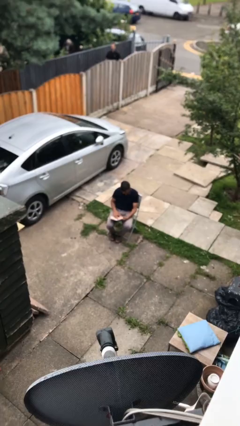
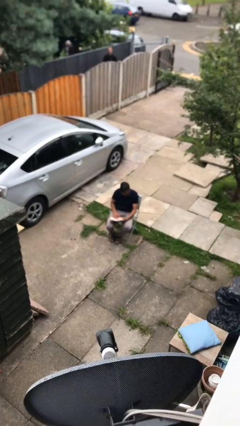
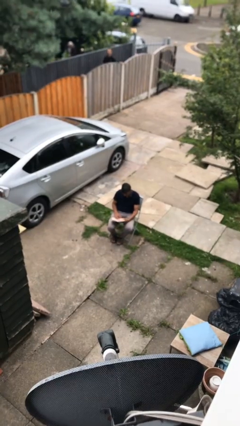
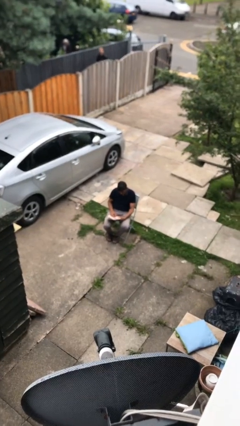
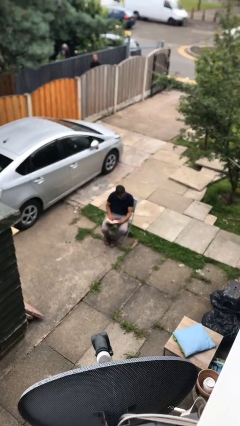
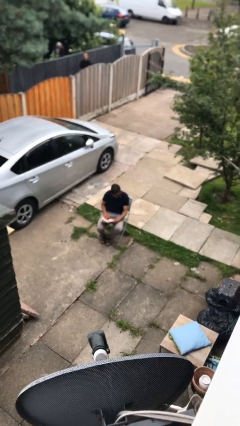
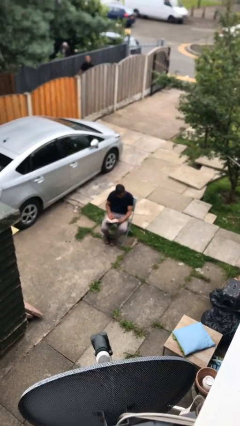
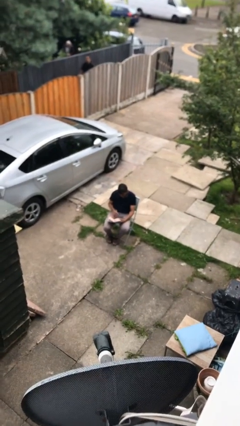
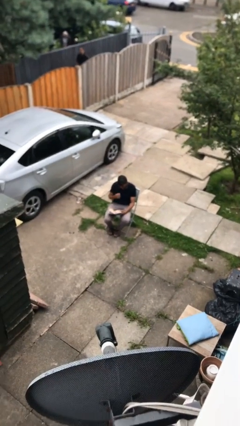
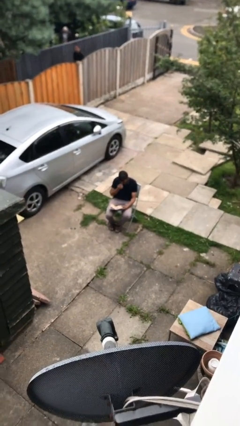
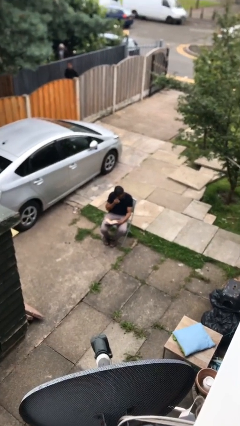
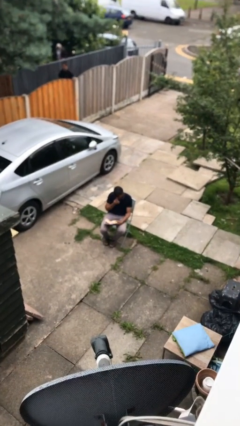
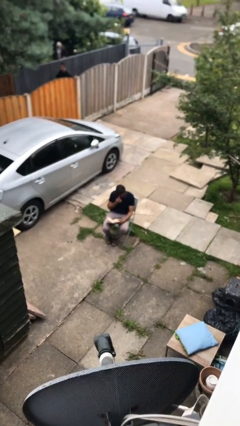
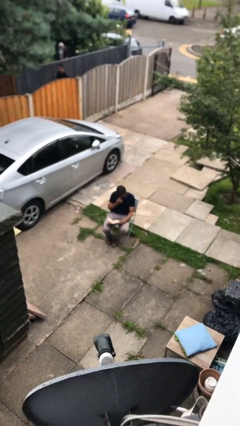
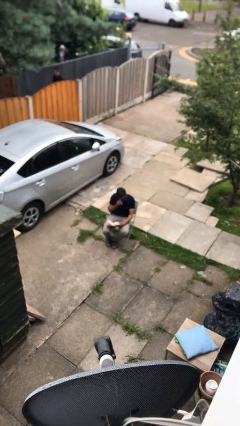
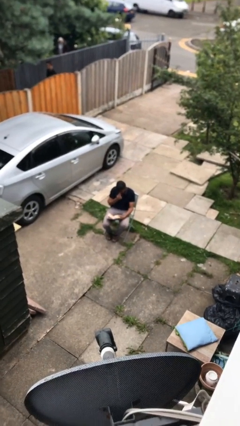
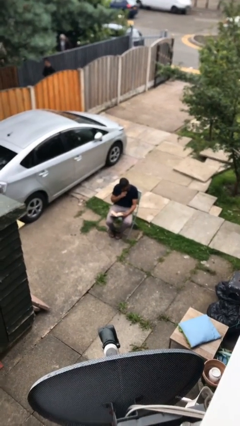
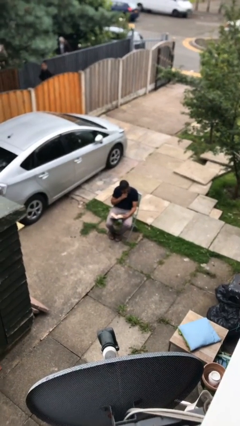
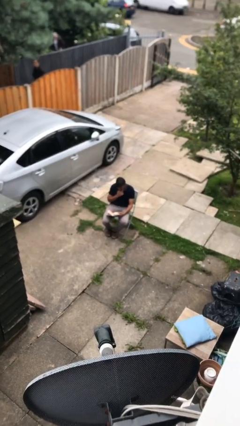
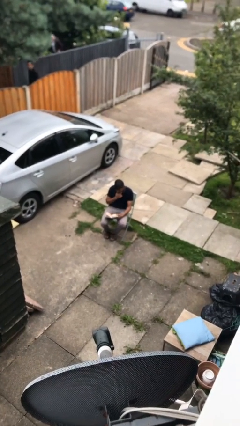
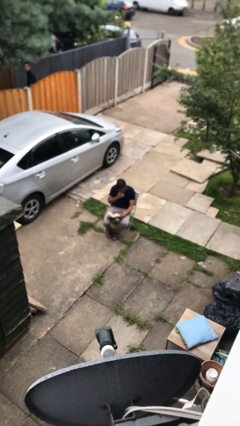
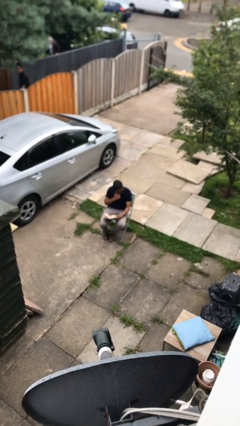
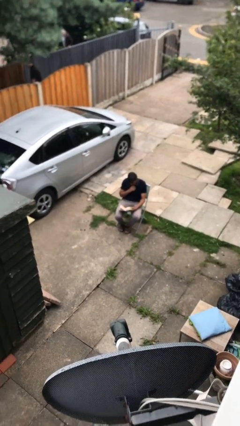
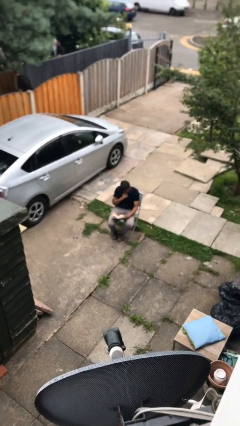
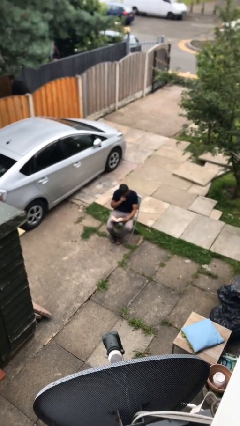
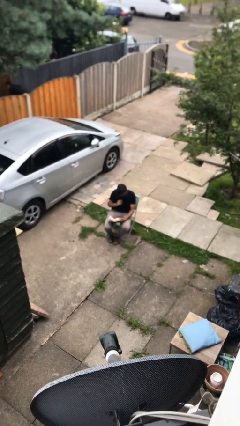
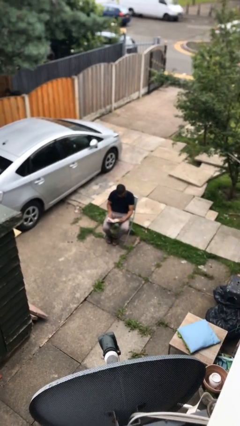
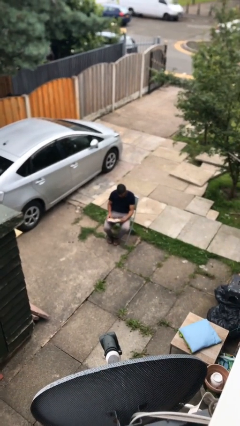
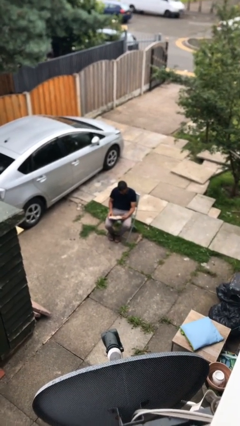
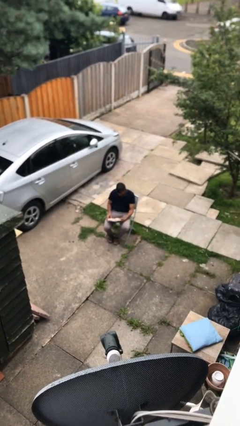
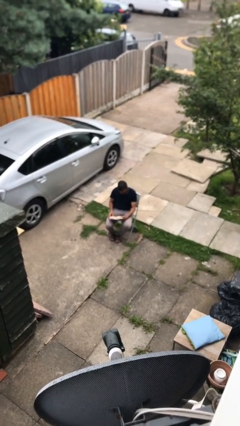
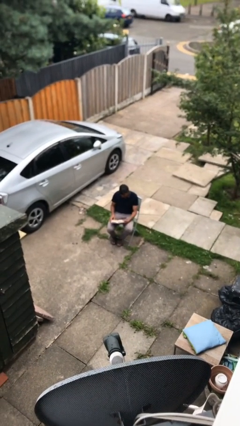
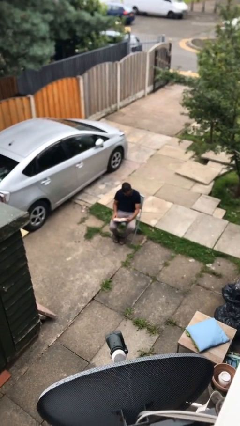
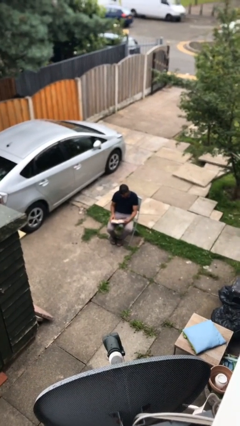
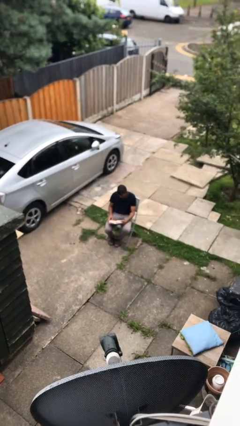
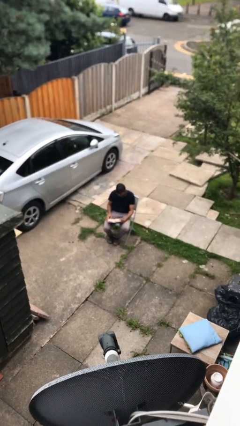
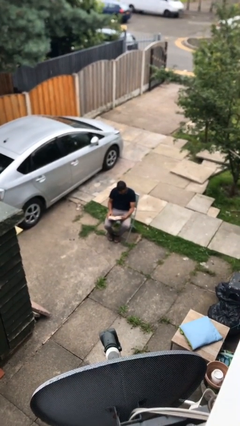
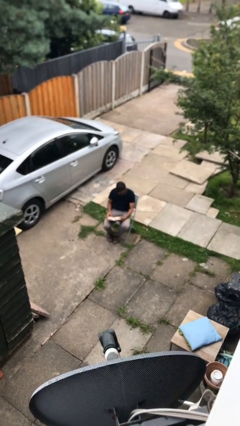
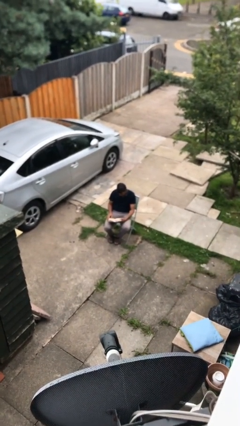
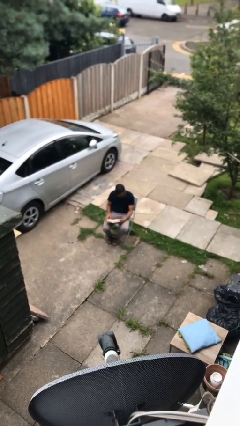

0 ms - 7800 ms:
person reads document

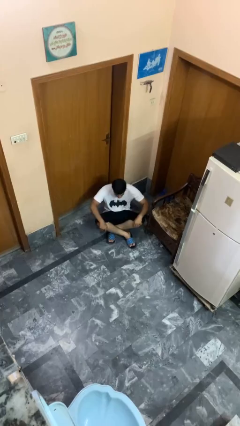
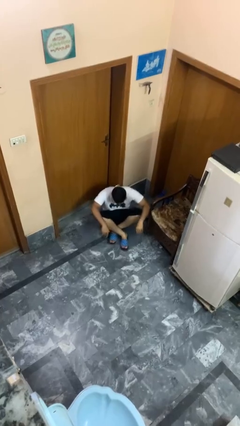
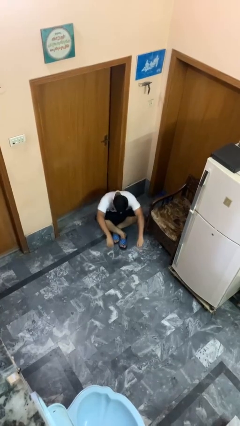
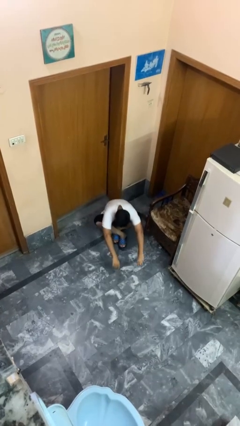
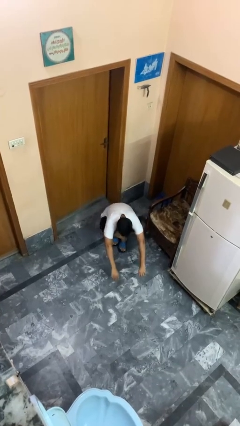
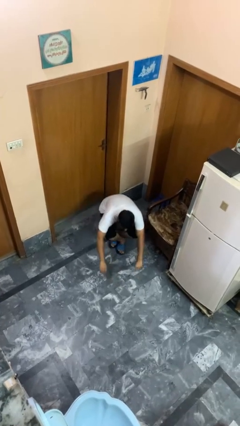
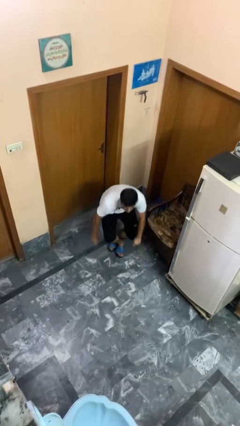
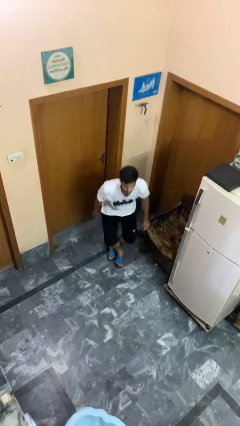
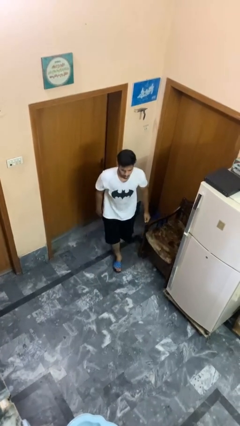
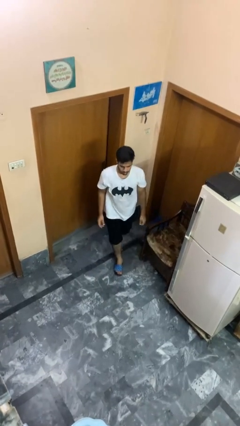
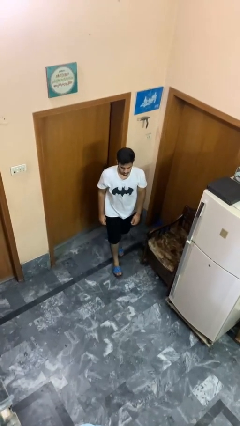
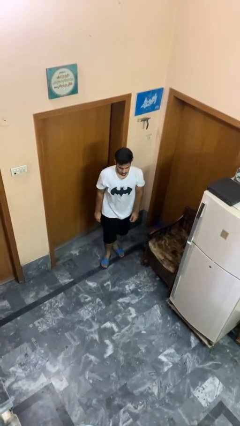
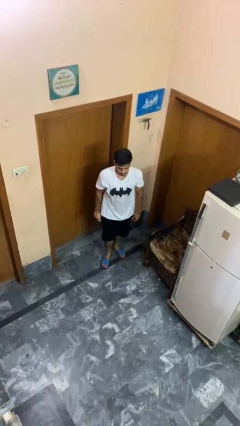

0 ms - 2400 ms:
person stands up from floor

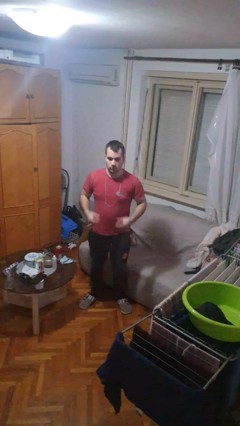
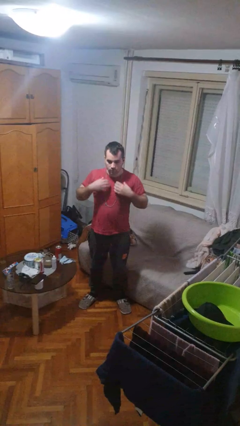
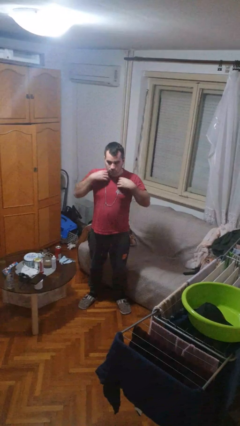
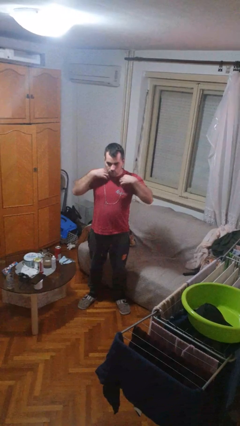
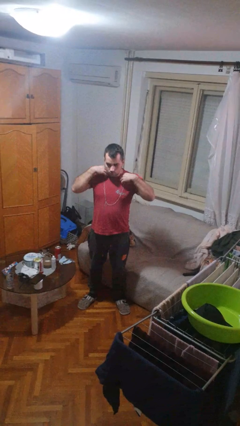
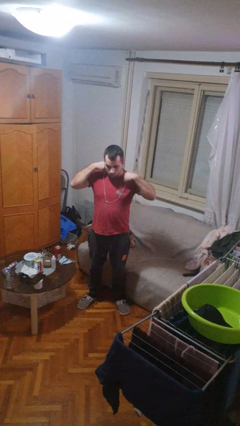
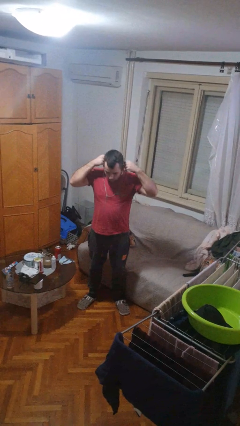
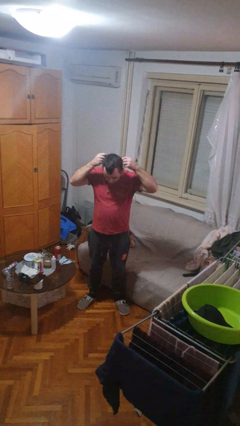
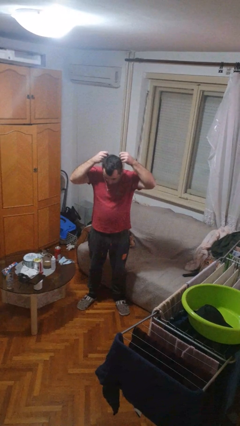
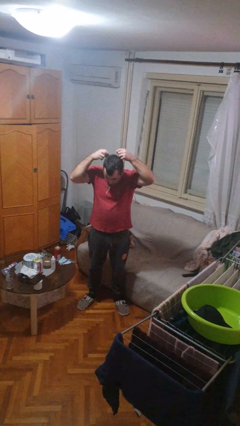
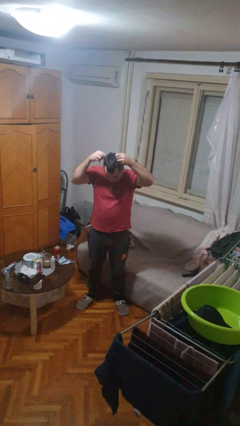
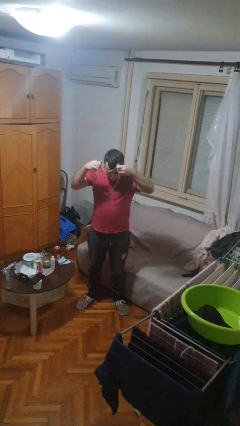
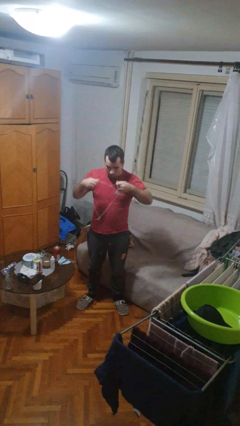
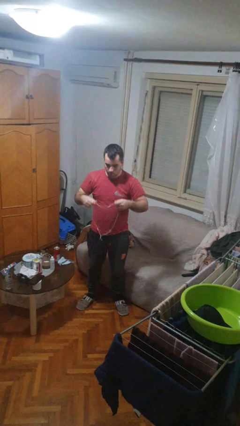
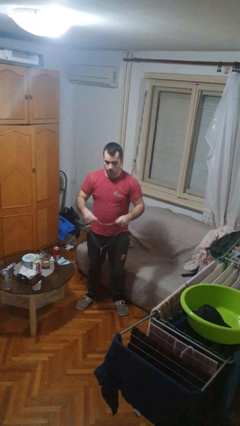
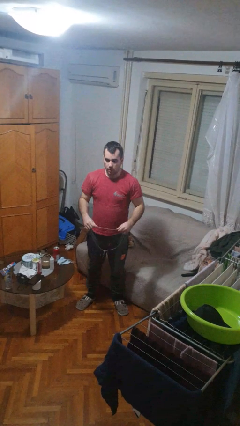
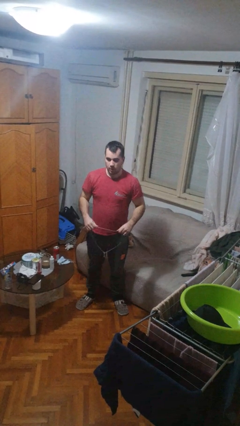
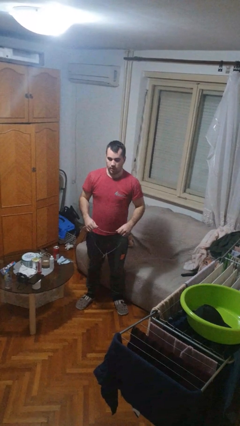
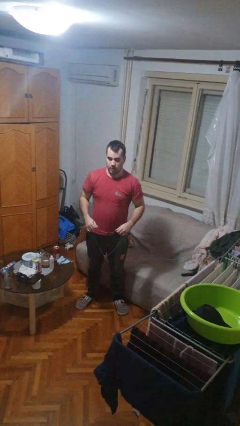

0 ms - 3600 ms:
person takes off necklace

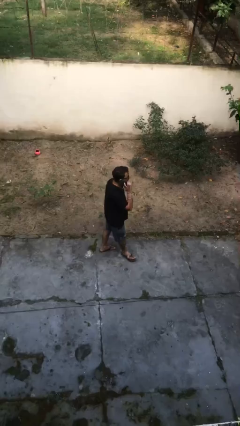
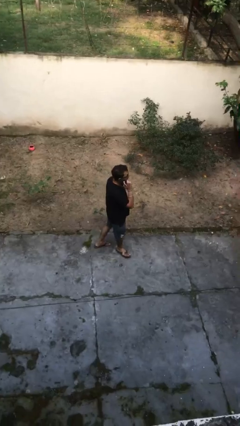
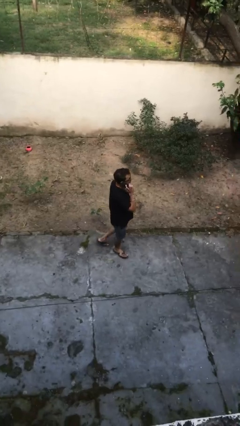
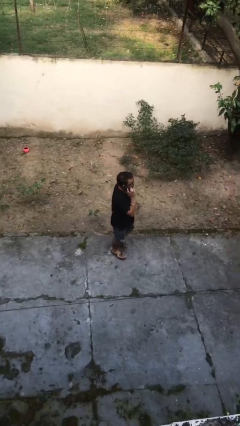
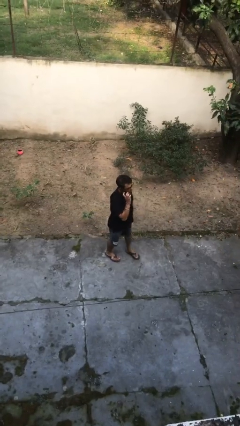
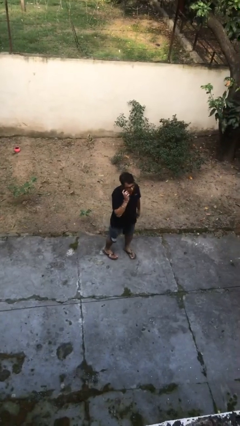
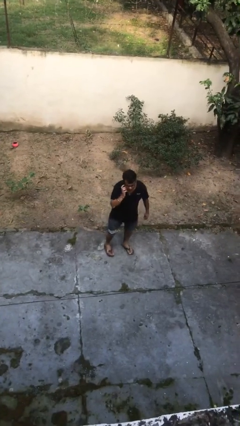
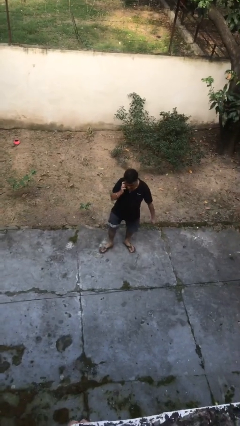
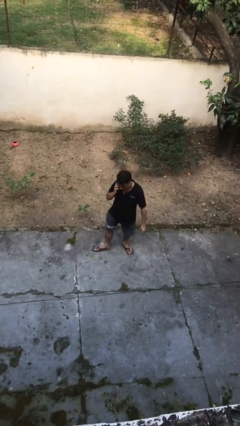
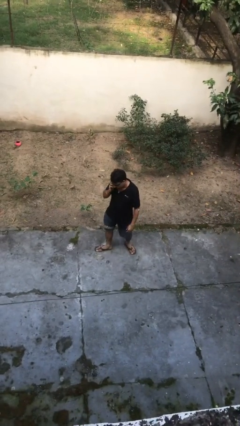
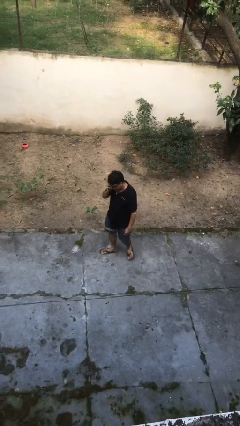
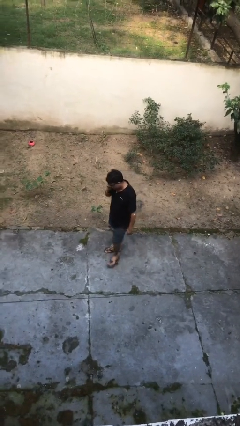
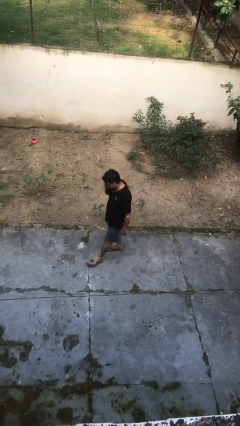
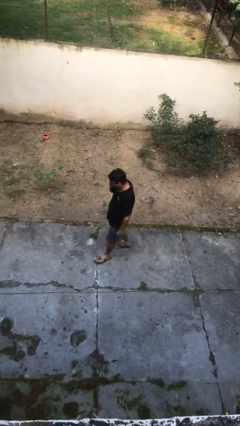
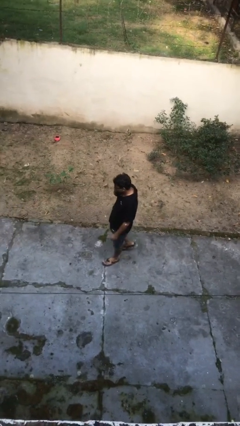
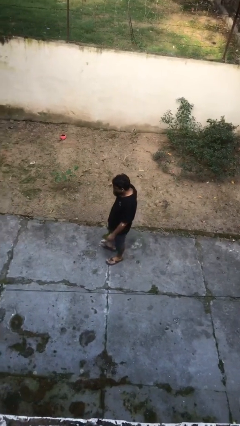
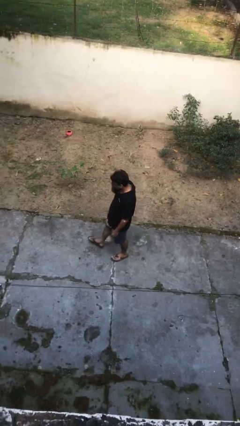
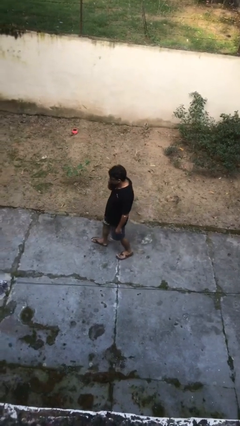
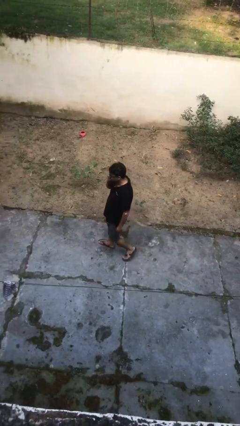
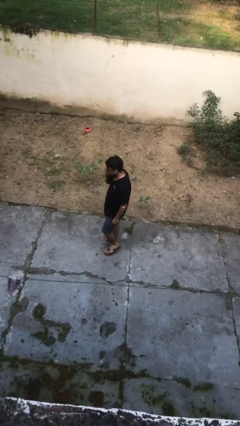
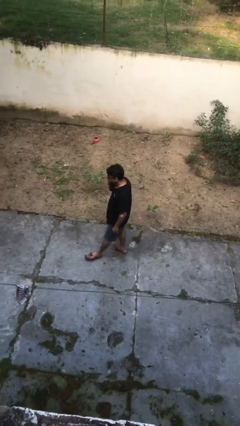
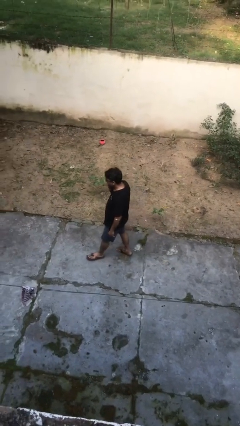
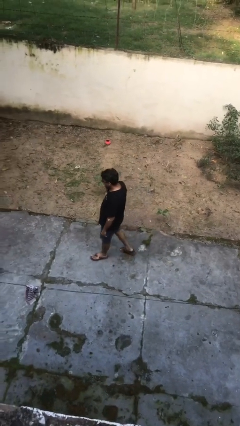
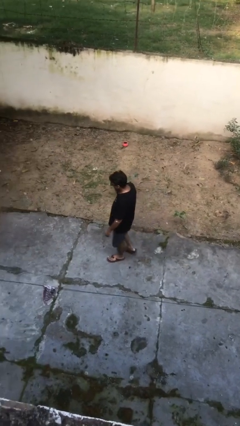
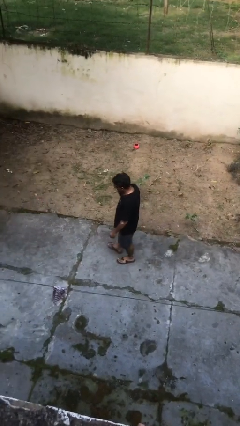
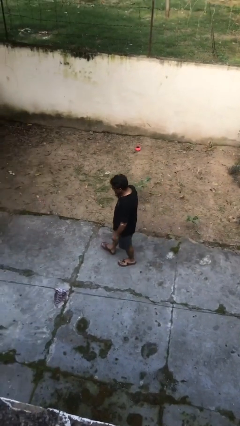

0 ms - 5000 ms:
person talks on phone
